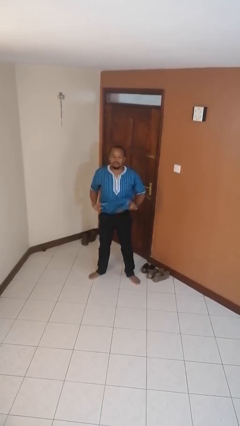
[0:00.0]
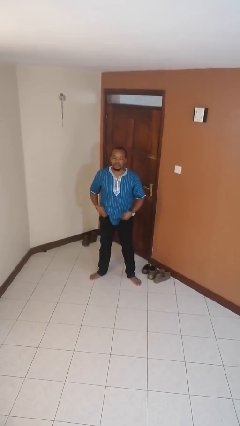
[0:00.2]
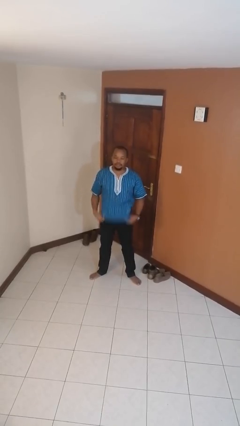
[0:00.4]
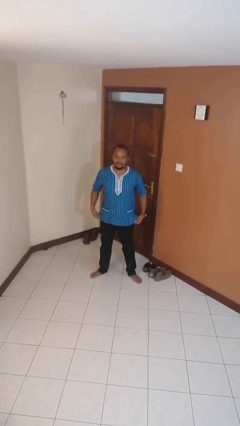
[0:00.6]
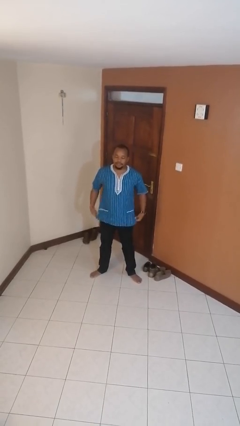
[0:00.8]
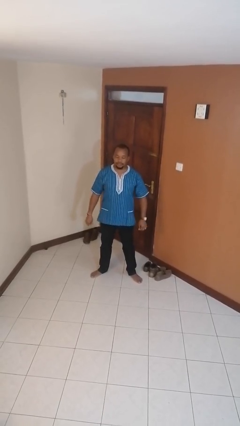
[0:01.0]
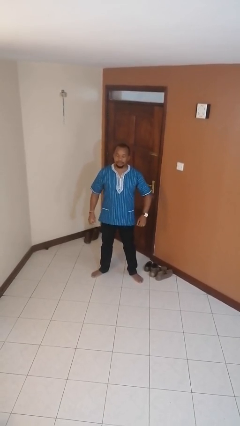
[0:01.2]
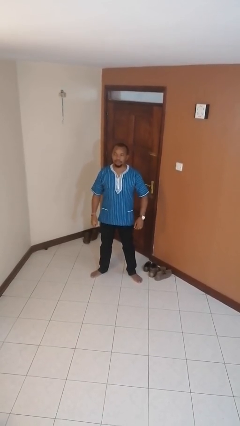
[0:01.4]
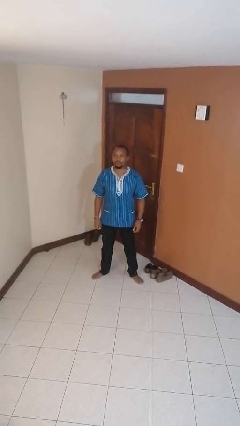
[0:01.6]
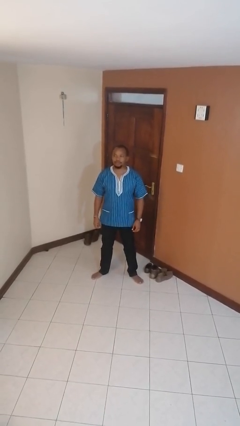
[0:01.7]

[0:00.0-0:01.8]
person untucks shirt

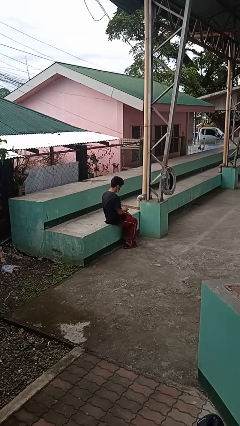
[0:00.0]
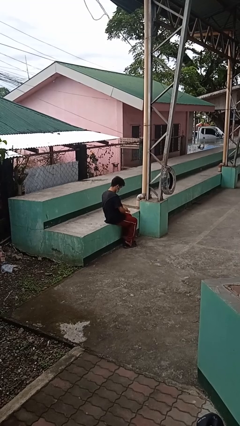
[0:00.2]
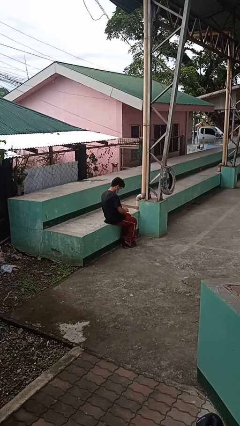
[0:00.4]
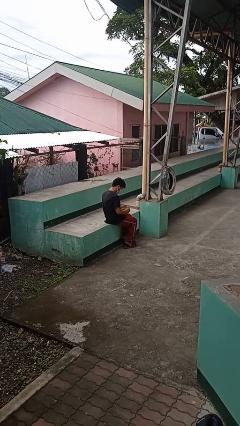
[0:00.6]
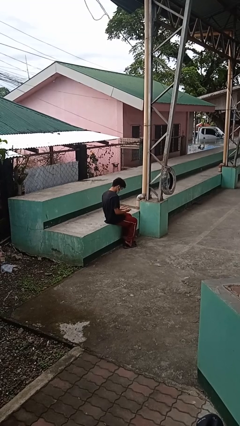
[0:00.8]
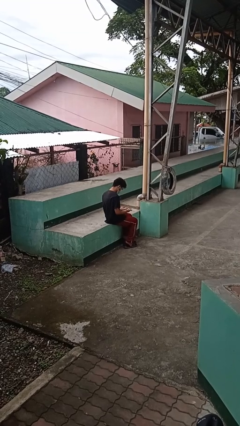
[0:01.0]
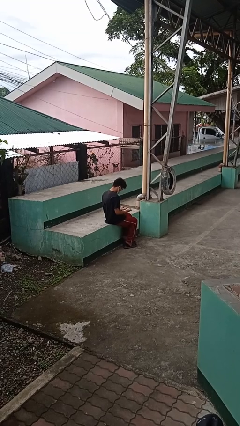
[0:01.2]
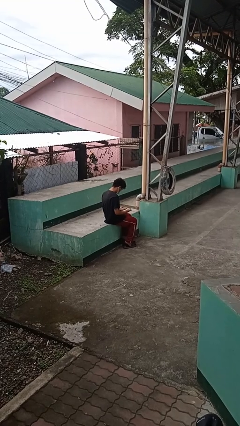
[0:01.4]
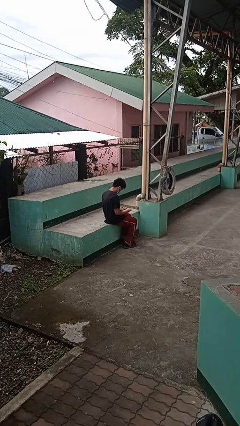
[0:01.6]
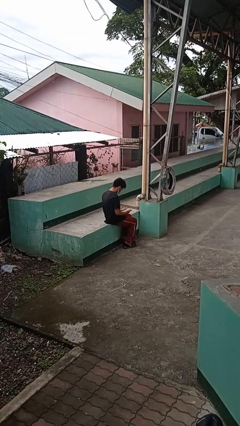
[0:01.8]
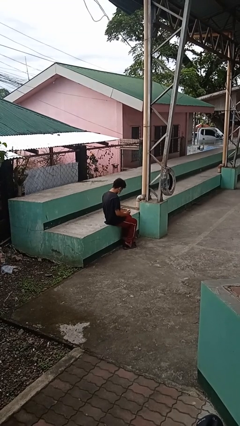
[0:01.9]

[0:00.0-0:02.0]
person looks at hands in lap

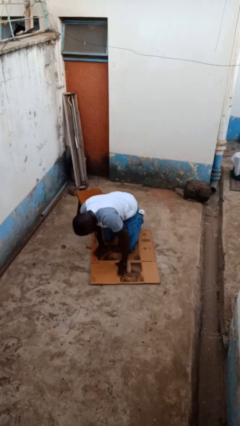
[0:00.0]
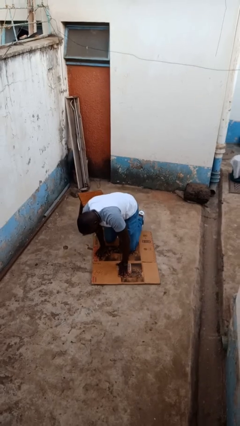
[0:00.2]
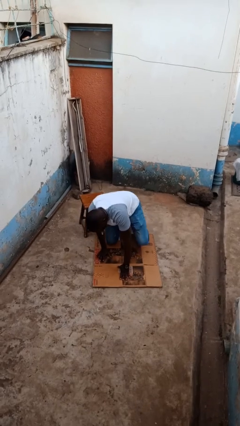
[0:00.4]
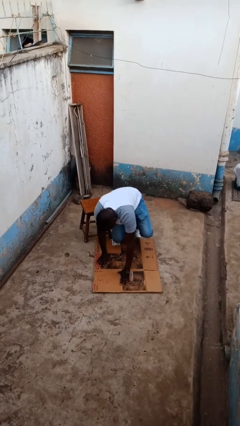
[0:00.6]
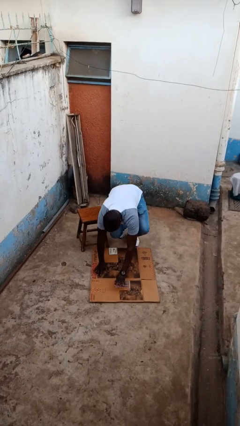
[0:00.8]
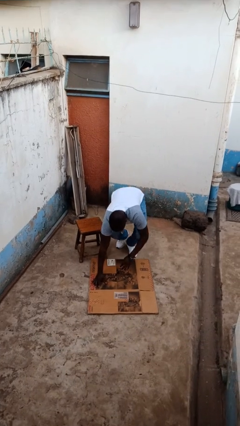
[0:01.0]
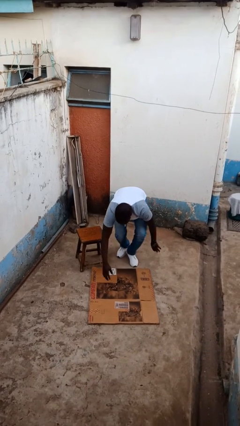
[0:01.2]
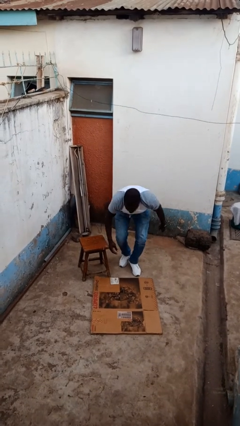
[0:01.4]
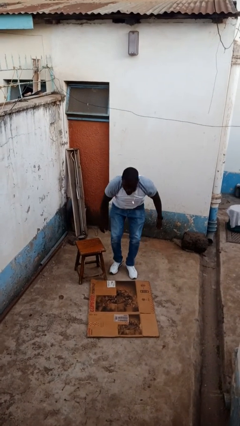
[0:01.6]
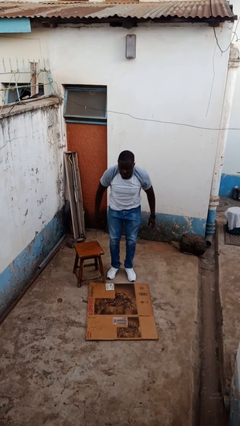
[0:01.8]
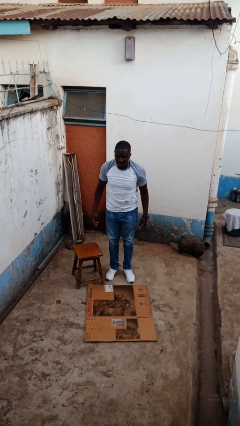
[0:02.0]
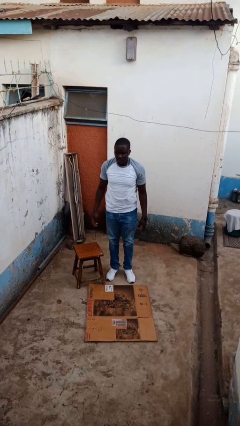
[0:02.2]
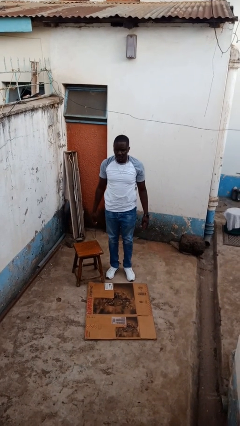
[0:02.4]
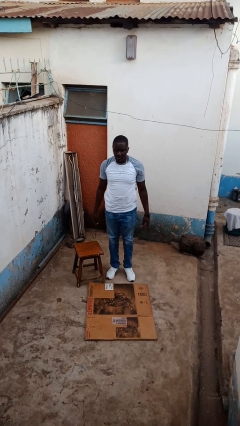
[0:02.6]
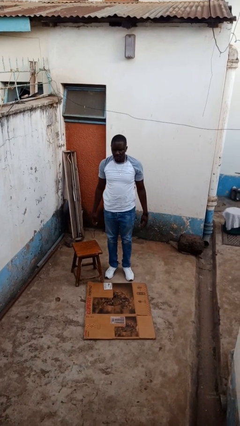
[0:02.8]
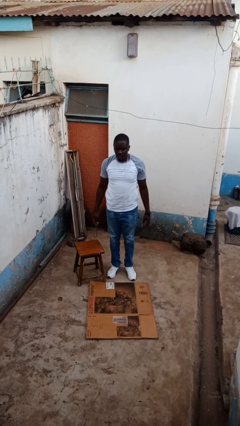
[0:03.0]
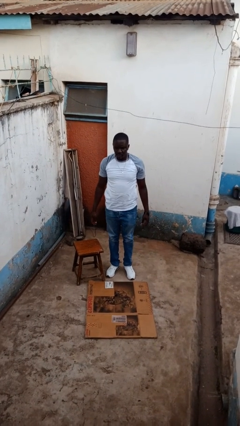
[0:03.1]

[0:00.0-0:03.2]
person stands up from floor

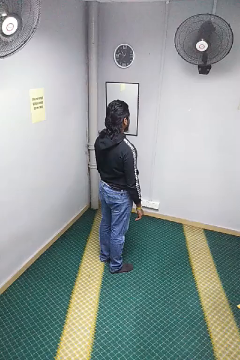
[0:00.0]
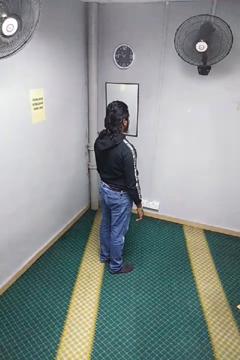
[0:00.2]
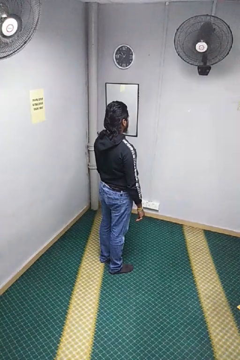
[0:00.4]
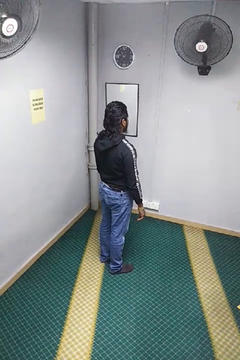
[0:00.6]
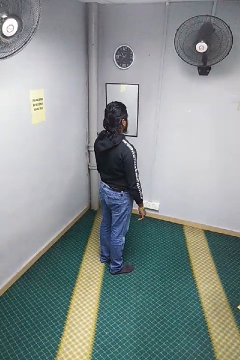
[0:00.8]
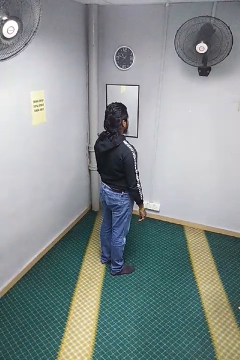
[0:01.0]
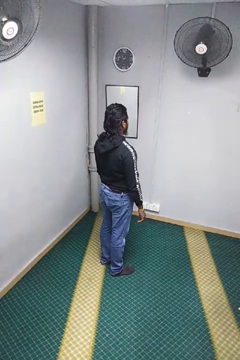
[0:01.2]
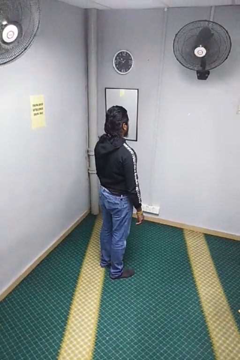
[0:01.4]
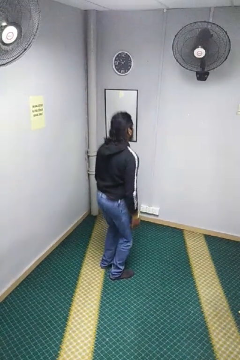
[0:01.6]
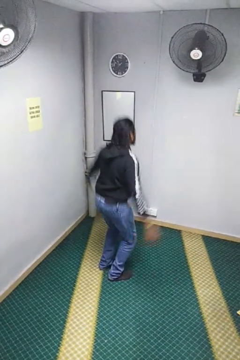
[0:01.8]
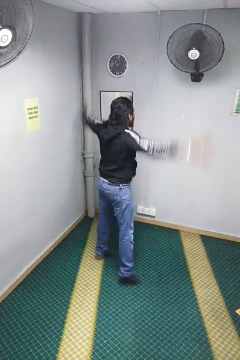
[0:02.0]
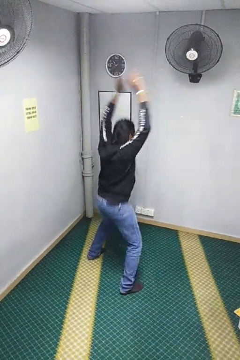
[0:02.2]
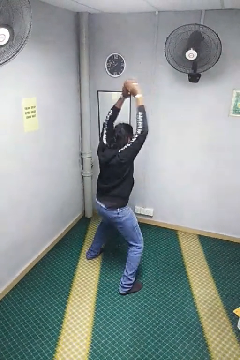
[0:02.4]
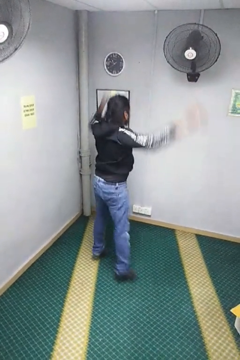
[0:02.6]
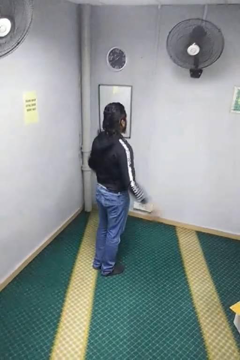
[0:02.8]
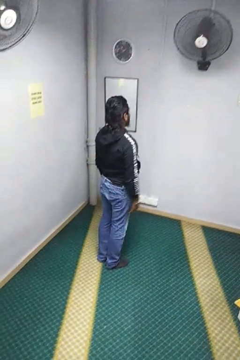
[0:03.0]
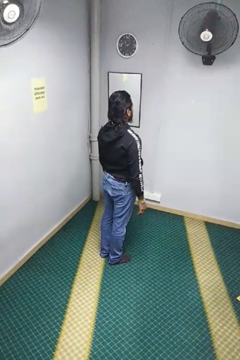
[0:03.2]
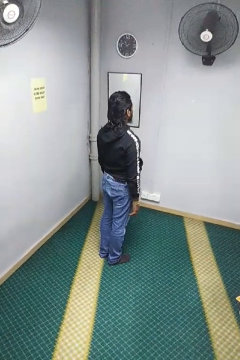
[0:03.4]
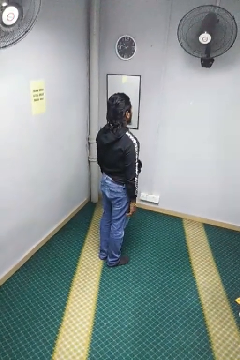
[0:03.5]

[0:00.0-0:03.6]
person exercises with jumping jacks

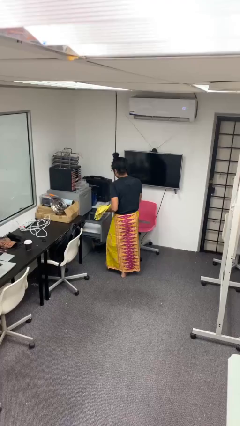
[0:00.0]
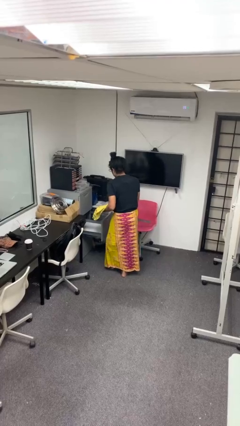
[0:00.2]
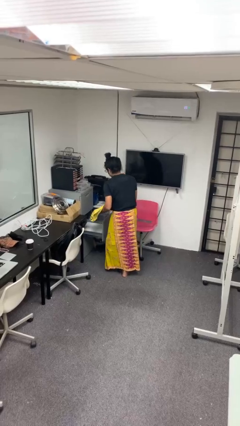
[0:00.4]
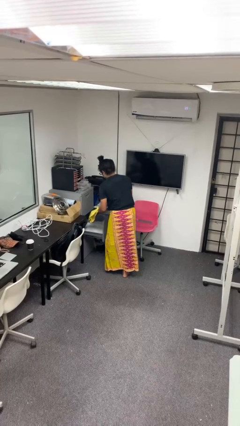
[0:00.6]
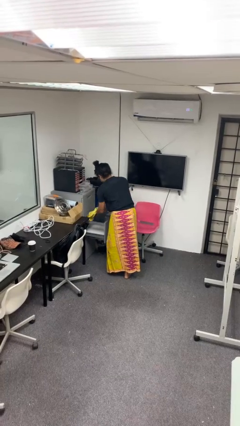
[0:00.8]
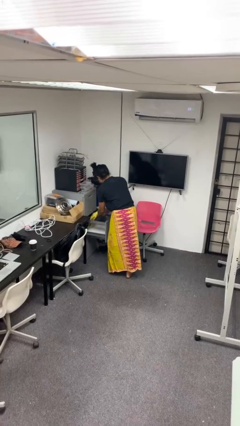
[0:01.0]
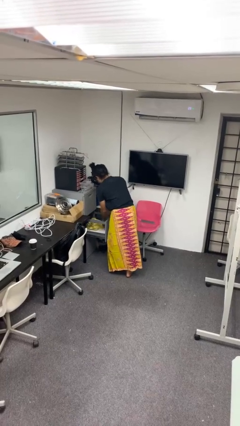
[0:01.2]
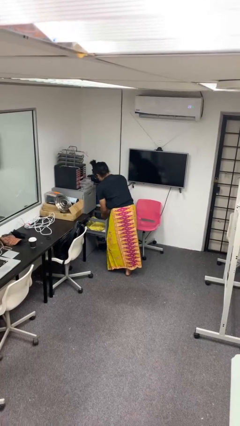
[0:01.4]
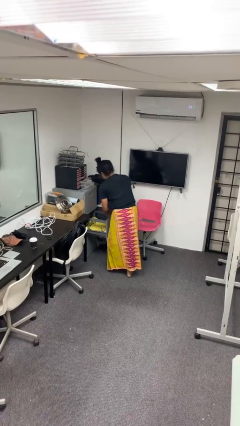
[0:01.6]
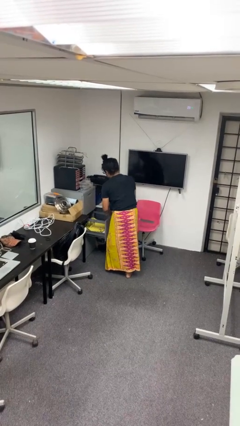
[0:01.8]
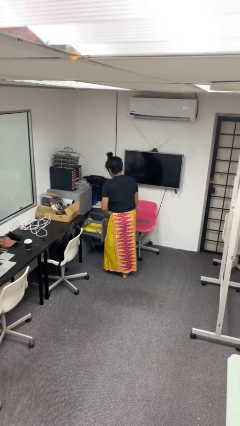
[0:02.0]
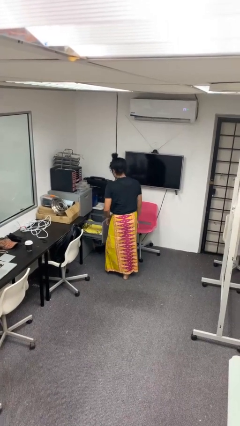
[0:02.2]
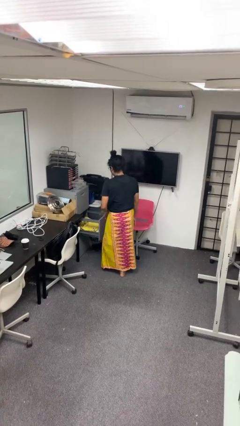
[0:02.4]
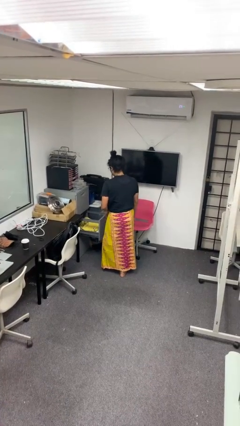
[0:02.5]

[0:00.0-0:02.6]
person puts clothes into dresser

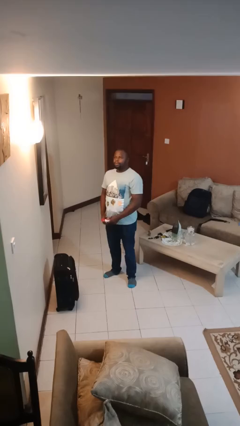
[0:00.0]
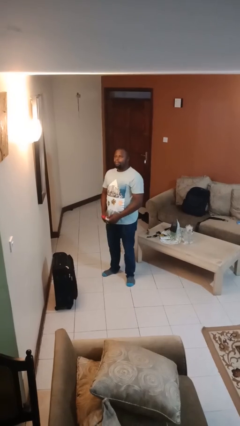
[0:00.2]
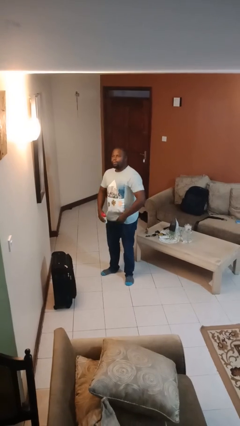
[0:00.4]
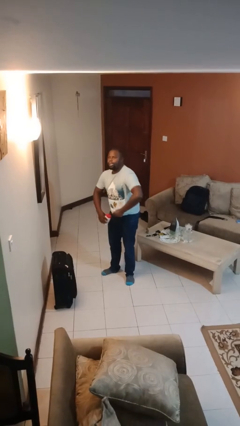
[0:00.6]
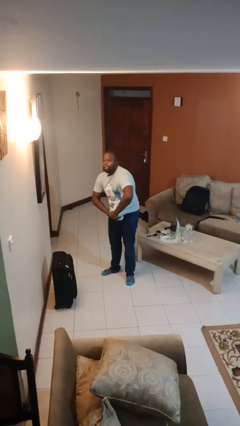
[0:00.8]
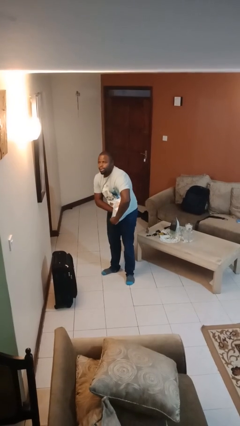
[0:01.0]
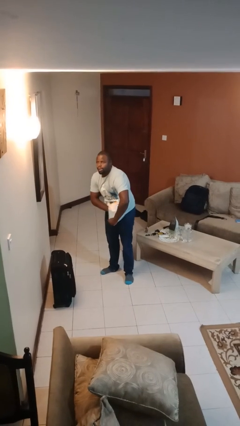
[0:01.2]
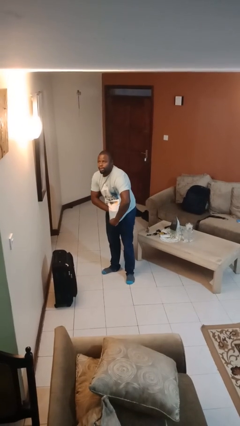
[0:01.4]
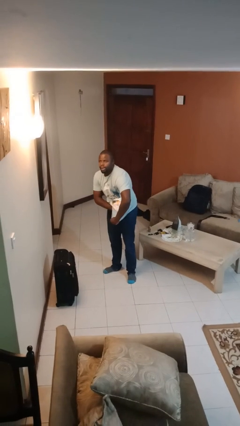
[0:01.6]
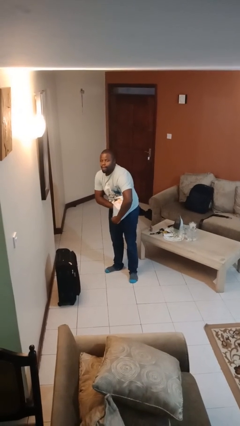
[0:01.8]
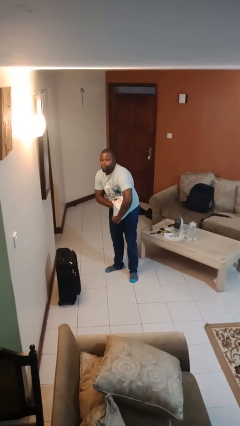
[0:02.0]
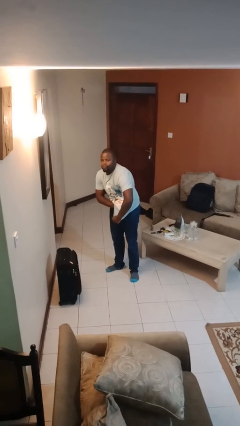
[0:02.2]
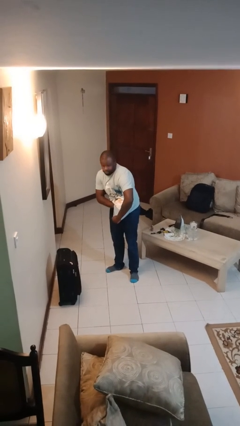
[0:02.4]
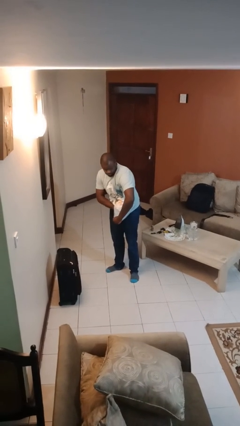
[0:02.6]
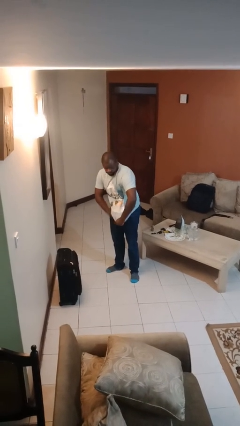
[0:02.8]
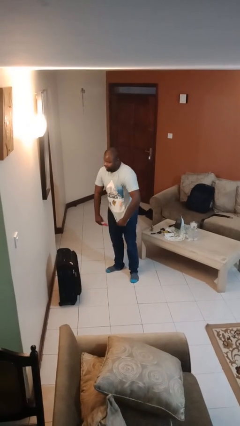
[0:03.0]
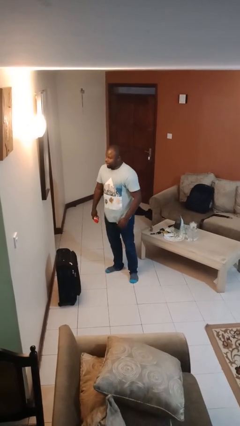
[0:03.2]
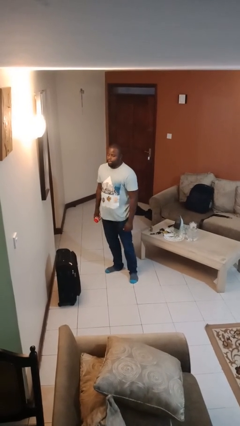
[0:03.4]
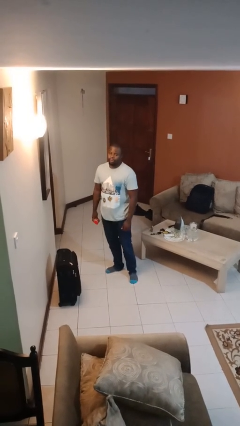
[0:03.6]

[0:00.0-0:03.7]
person applies deodorant

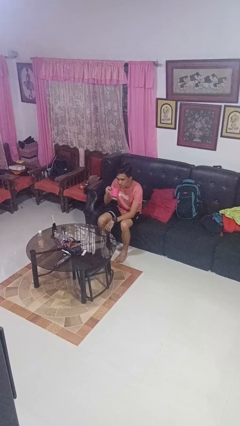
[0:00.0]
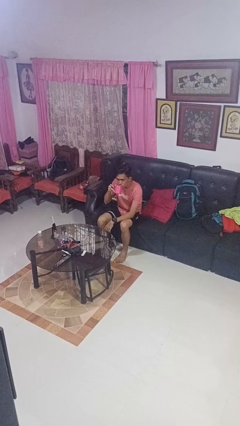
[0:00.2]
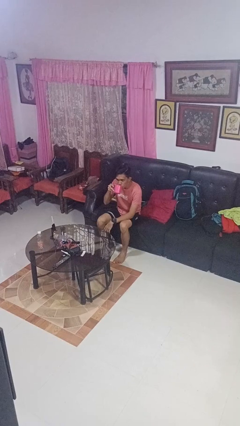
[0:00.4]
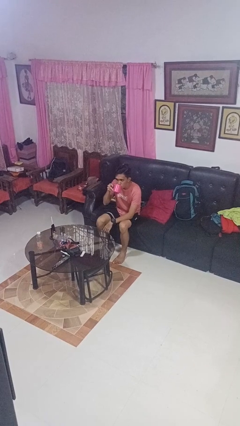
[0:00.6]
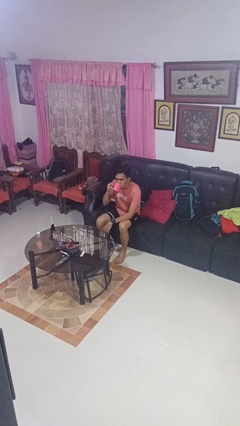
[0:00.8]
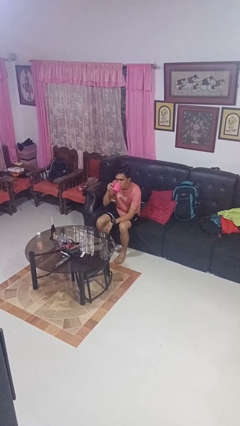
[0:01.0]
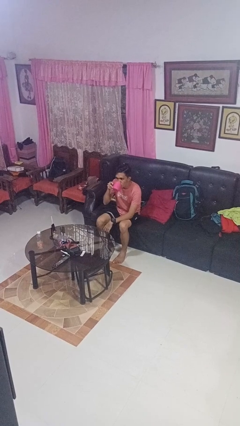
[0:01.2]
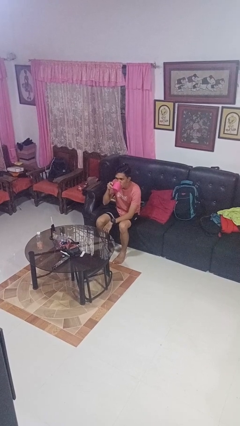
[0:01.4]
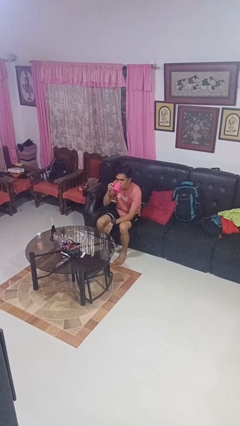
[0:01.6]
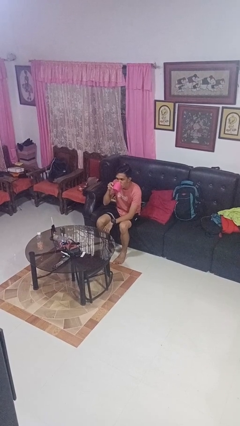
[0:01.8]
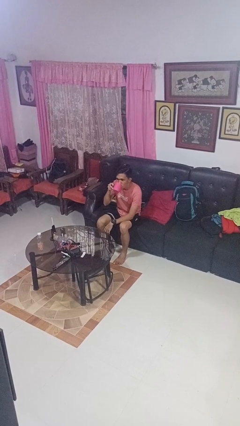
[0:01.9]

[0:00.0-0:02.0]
person drinks from mug
